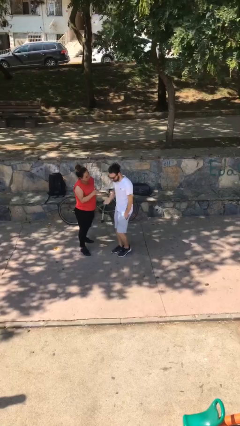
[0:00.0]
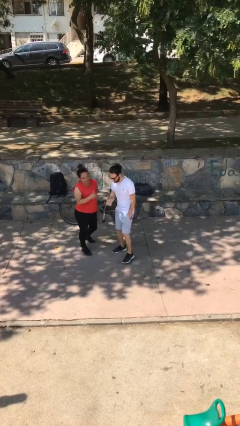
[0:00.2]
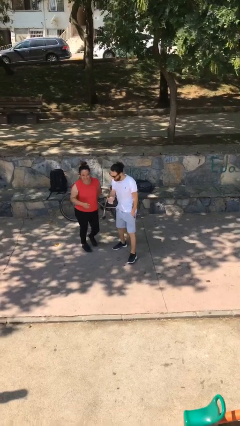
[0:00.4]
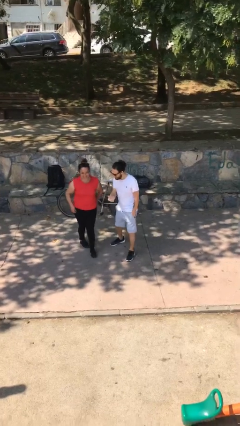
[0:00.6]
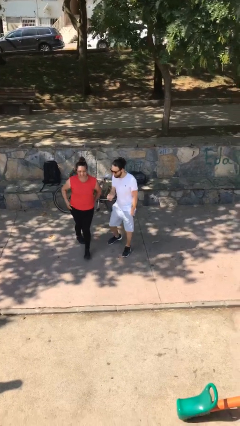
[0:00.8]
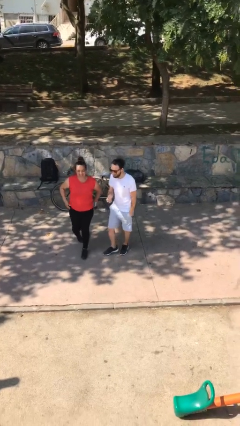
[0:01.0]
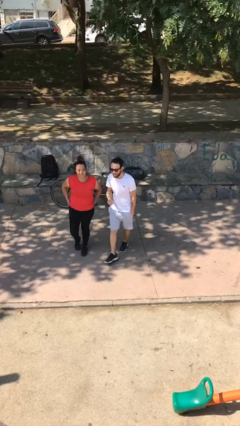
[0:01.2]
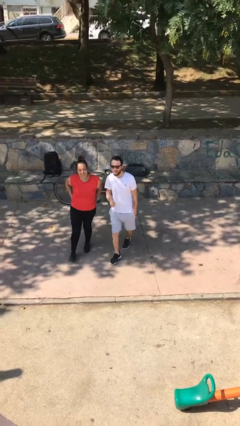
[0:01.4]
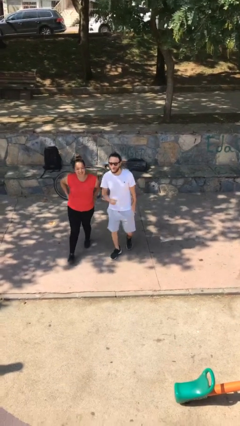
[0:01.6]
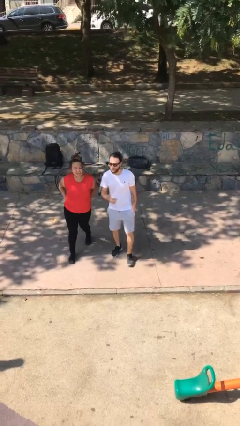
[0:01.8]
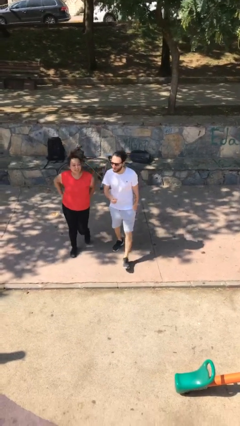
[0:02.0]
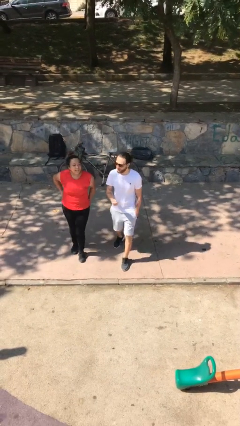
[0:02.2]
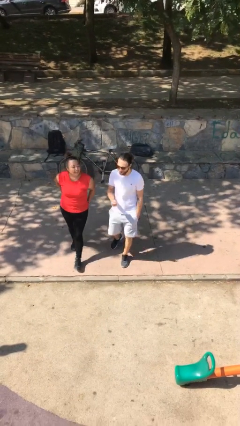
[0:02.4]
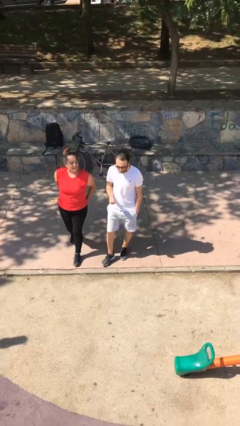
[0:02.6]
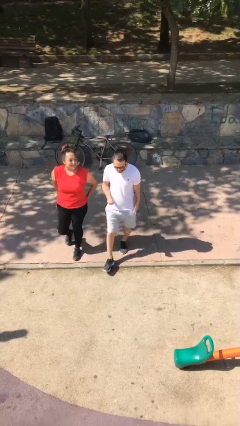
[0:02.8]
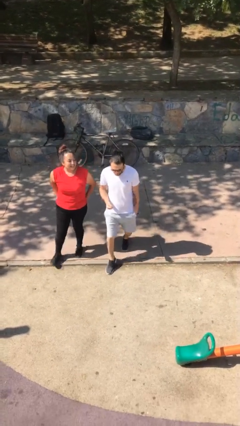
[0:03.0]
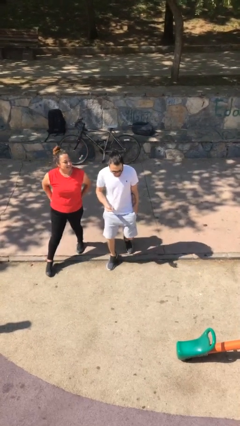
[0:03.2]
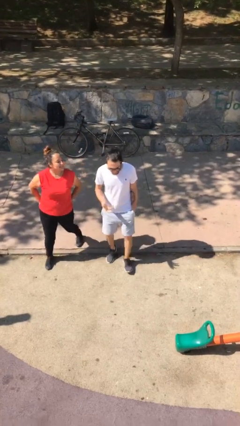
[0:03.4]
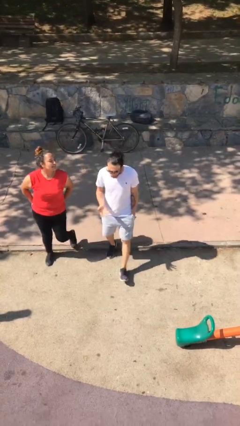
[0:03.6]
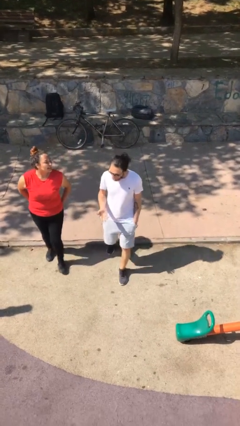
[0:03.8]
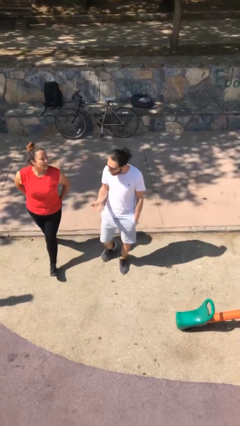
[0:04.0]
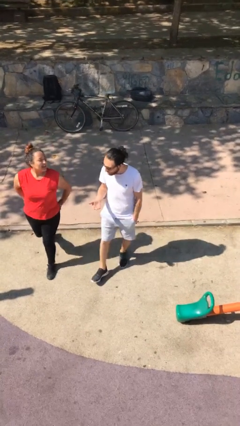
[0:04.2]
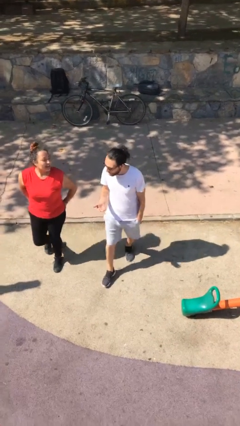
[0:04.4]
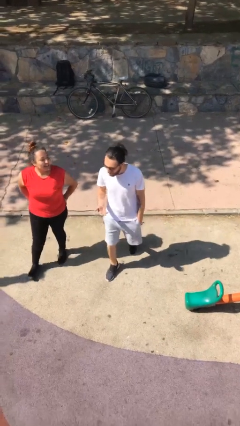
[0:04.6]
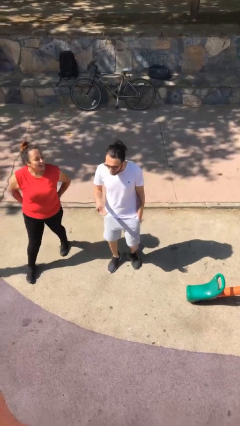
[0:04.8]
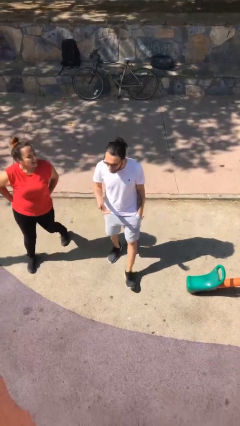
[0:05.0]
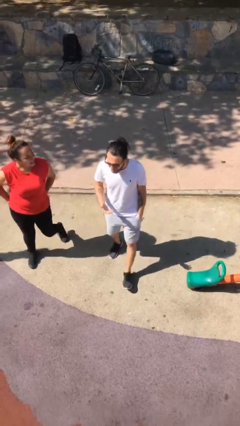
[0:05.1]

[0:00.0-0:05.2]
person talks to person

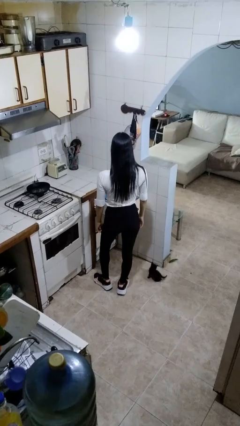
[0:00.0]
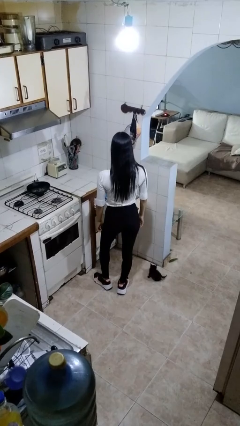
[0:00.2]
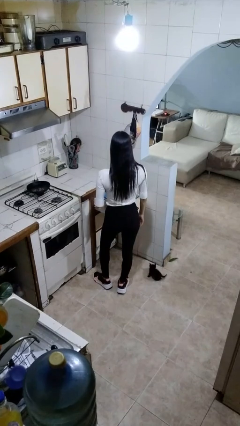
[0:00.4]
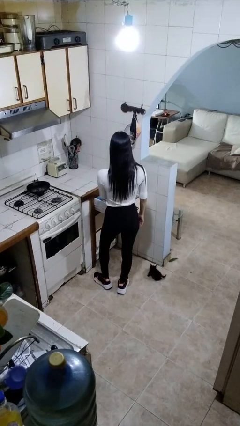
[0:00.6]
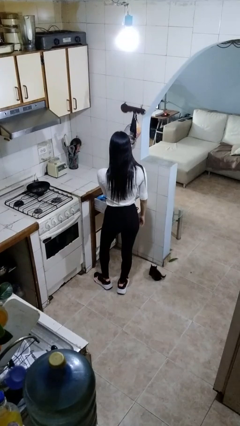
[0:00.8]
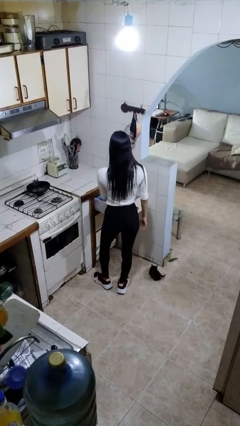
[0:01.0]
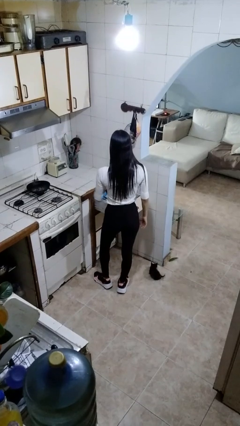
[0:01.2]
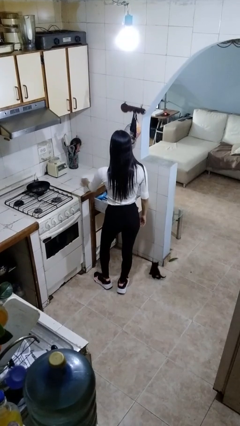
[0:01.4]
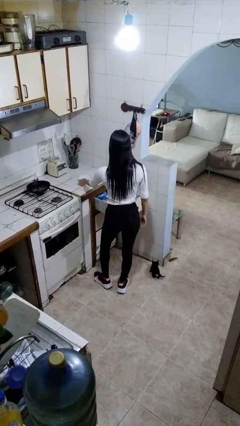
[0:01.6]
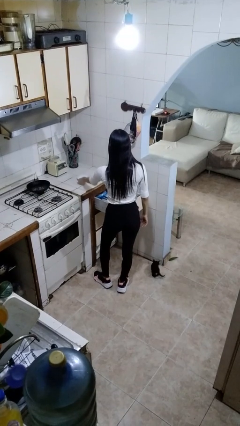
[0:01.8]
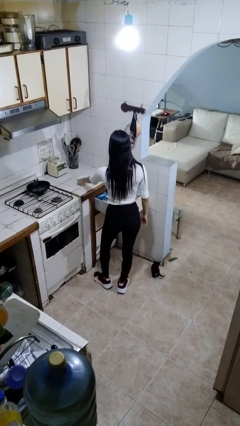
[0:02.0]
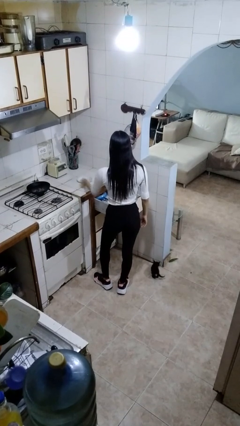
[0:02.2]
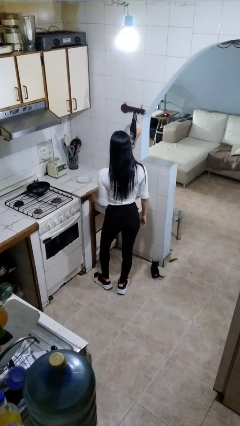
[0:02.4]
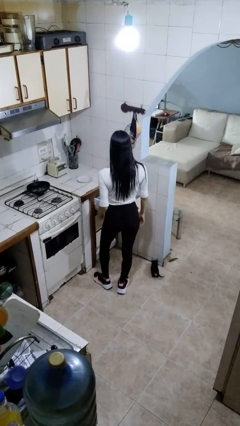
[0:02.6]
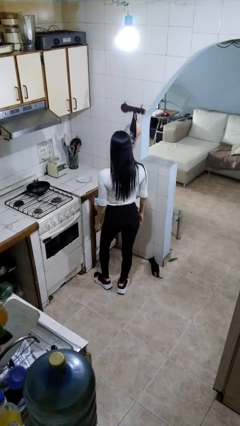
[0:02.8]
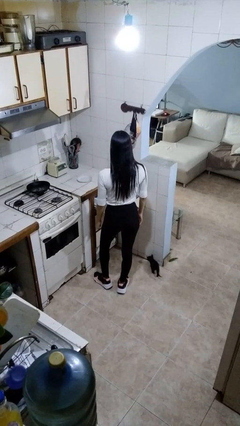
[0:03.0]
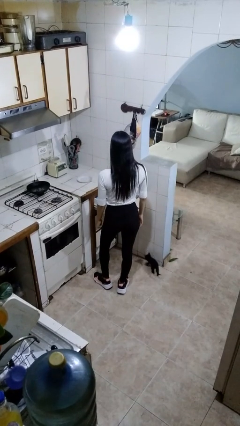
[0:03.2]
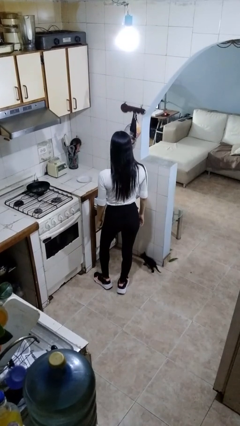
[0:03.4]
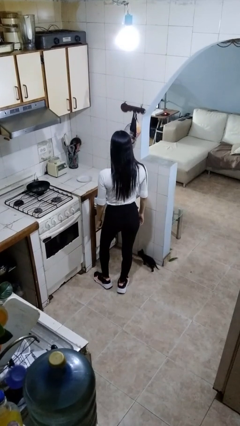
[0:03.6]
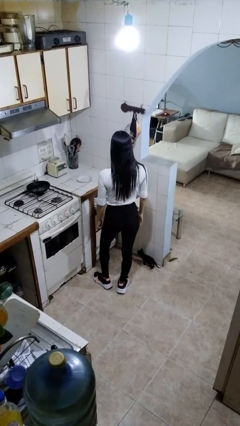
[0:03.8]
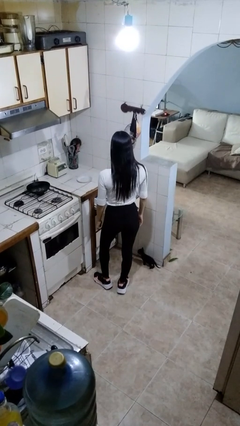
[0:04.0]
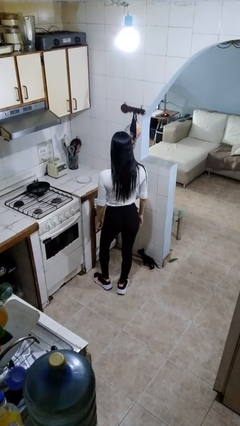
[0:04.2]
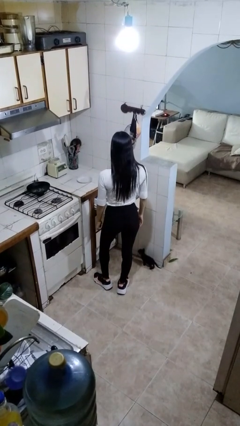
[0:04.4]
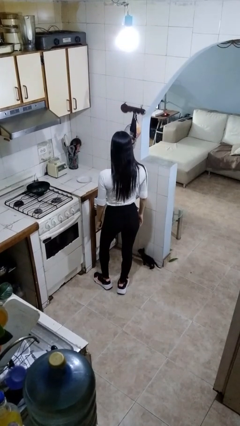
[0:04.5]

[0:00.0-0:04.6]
person takes object from kitchen drawer

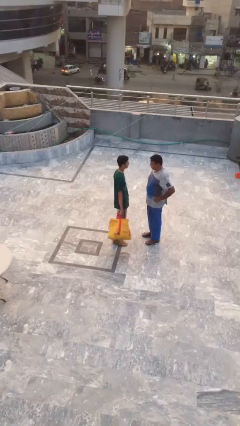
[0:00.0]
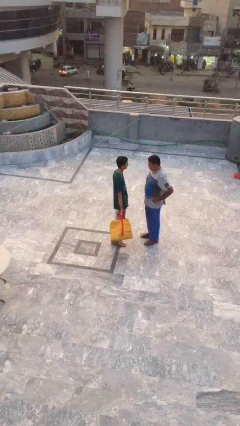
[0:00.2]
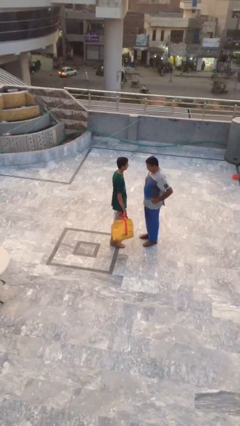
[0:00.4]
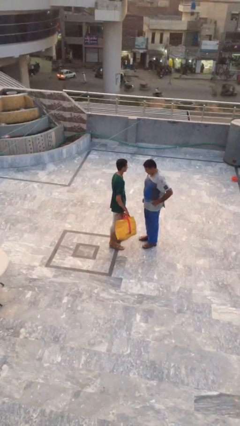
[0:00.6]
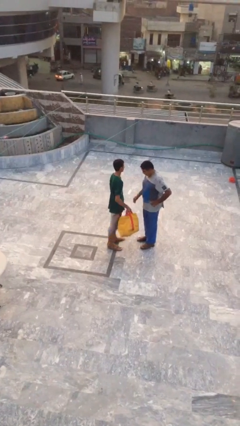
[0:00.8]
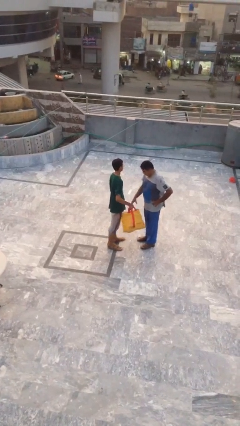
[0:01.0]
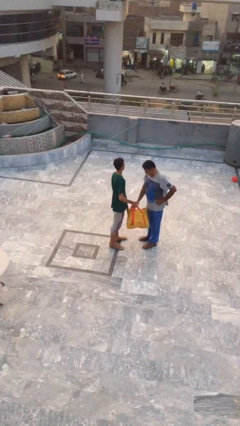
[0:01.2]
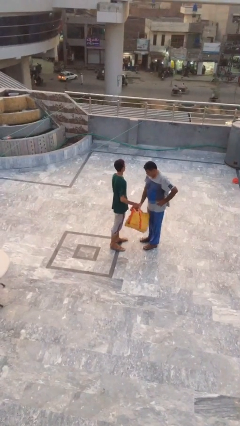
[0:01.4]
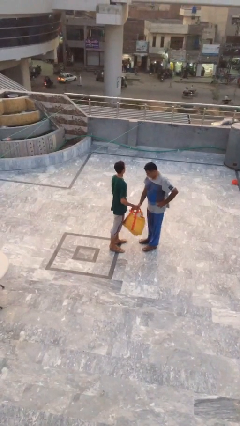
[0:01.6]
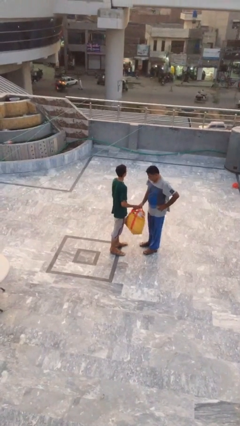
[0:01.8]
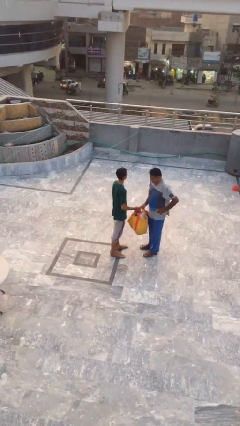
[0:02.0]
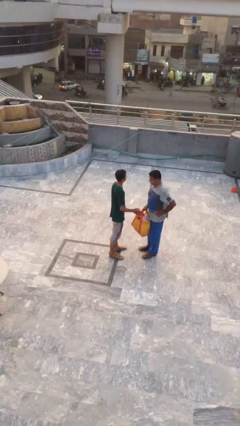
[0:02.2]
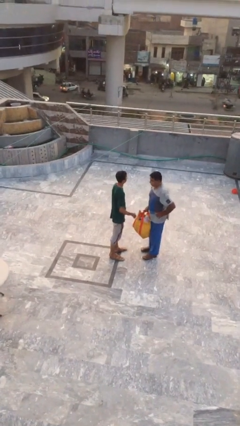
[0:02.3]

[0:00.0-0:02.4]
person transfers object to person

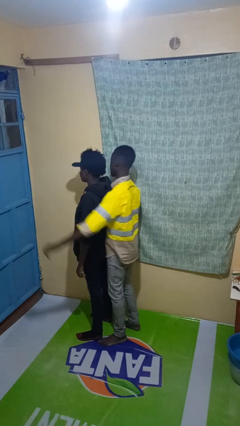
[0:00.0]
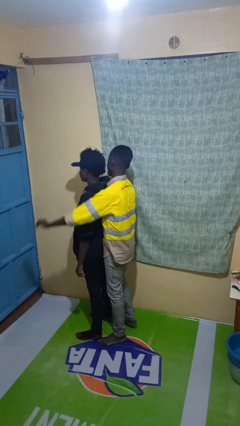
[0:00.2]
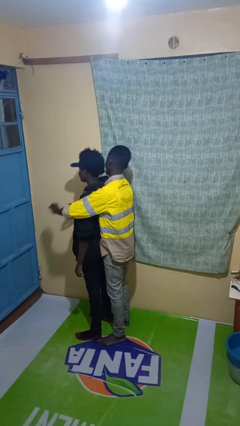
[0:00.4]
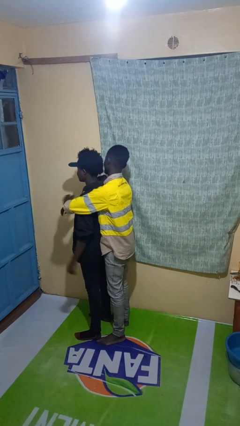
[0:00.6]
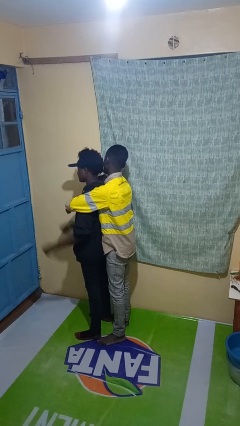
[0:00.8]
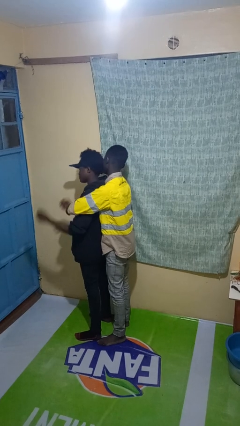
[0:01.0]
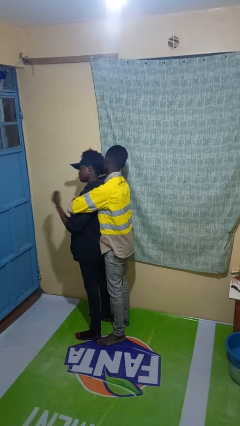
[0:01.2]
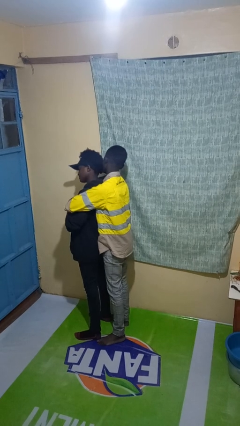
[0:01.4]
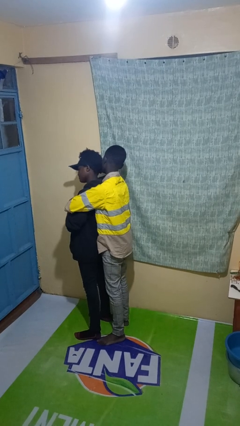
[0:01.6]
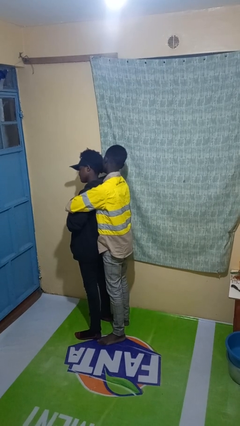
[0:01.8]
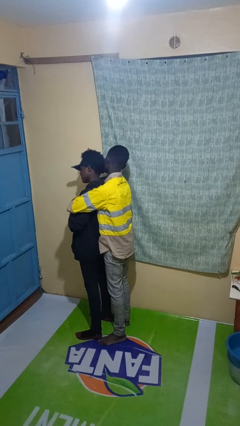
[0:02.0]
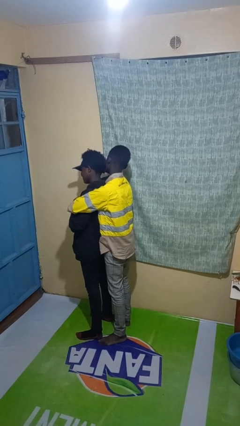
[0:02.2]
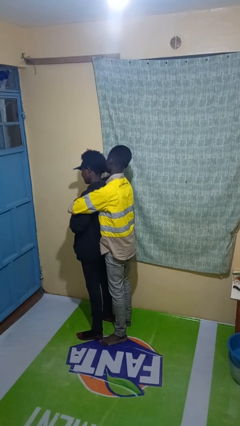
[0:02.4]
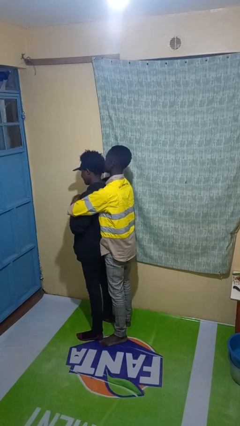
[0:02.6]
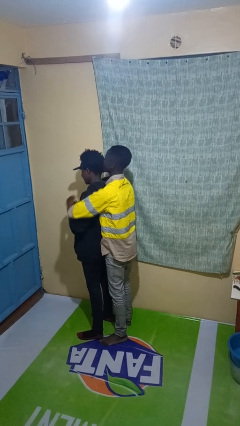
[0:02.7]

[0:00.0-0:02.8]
person hugs person from behind

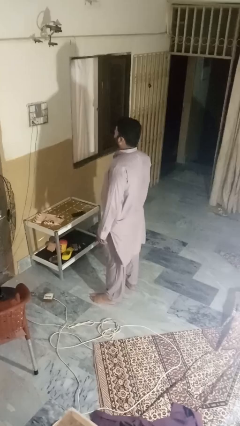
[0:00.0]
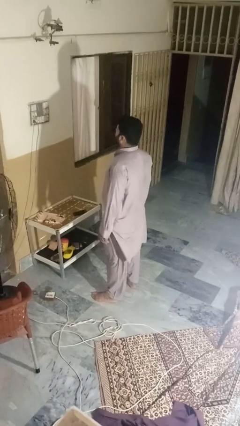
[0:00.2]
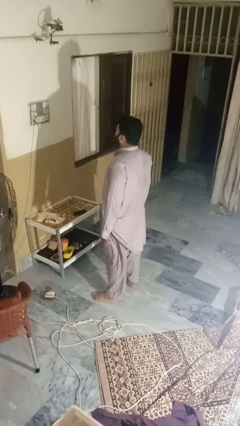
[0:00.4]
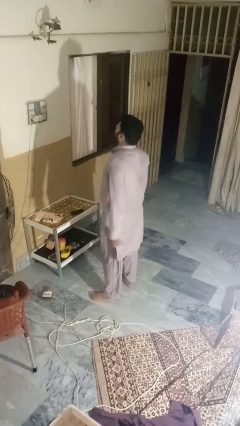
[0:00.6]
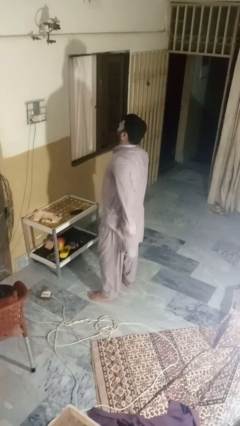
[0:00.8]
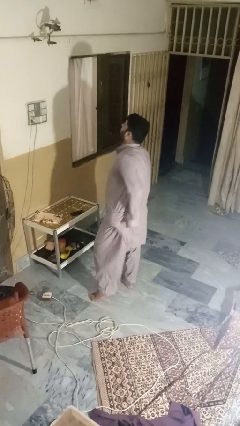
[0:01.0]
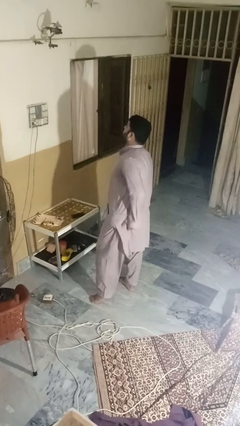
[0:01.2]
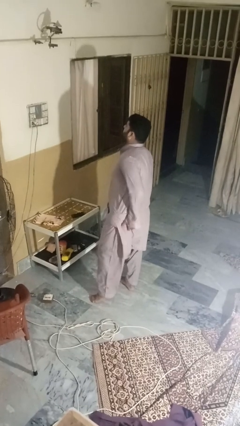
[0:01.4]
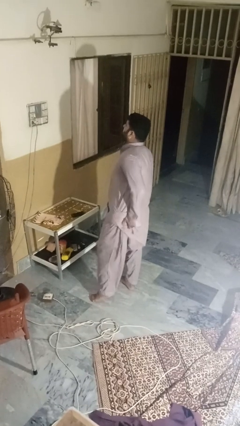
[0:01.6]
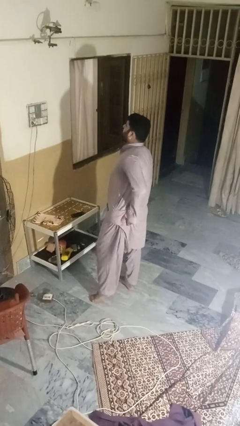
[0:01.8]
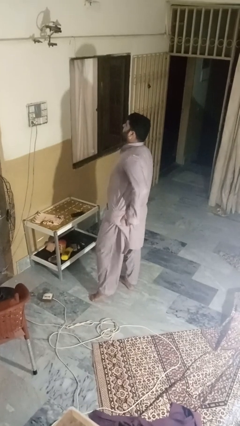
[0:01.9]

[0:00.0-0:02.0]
person wiggles hips

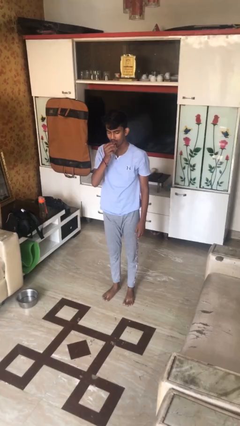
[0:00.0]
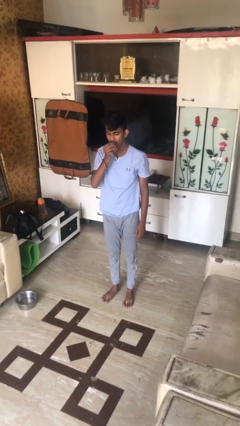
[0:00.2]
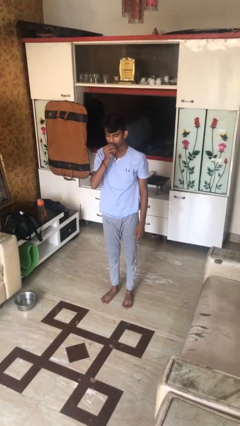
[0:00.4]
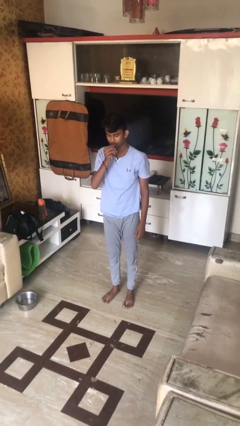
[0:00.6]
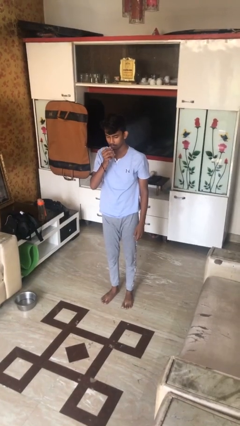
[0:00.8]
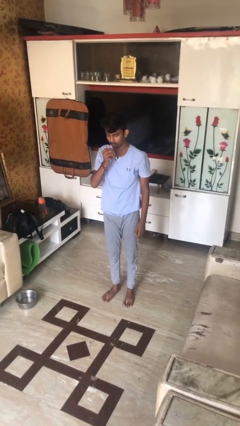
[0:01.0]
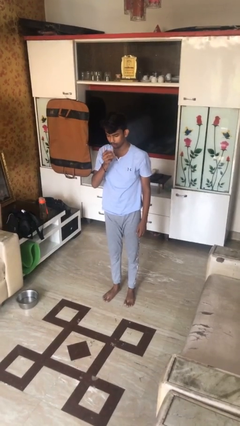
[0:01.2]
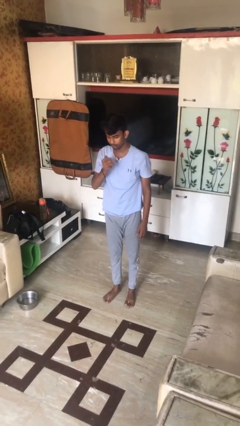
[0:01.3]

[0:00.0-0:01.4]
person eats apple
